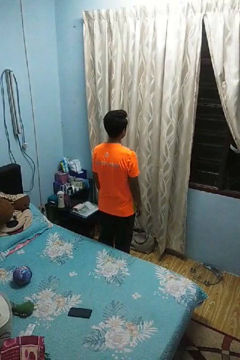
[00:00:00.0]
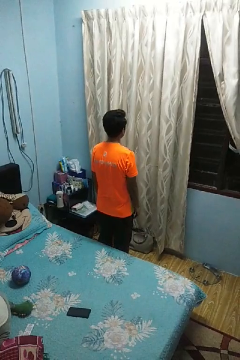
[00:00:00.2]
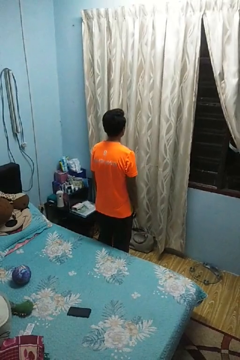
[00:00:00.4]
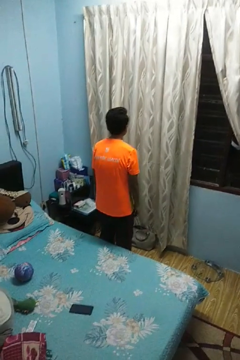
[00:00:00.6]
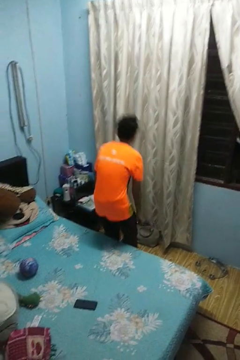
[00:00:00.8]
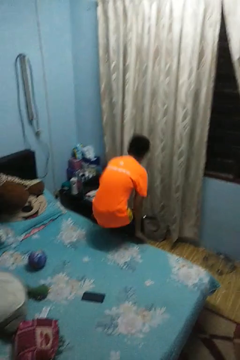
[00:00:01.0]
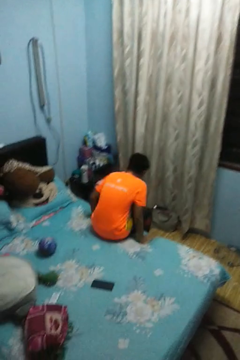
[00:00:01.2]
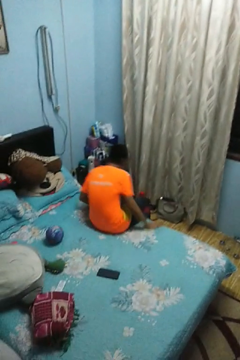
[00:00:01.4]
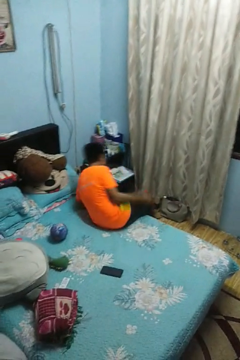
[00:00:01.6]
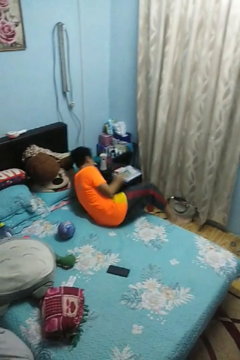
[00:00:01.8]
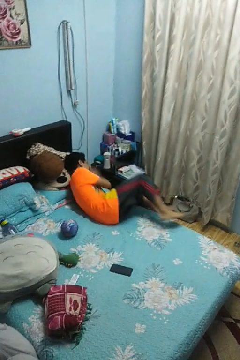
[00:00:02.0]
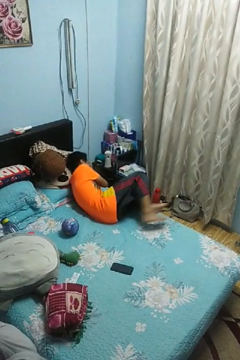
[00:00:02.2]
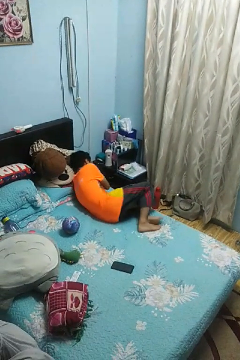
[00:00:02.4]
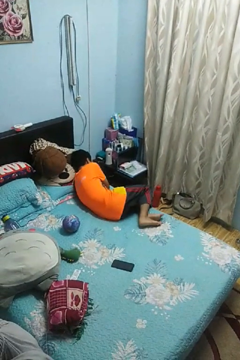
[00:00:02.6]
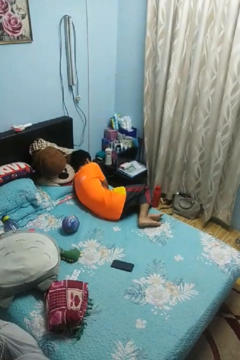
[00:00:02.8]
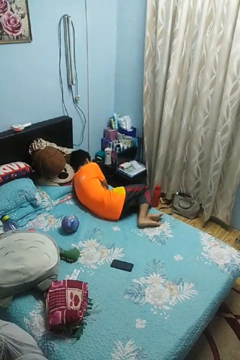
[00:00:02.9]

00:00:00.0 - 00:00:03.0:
person lies down on bed

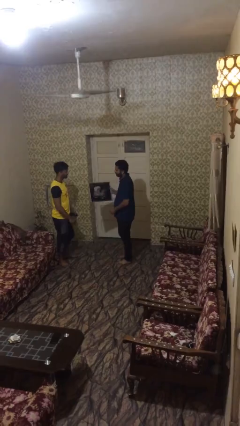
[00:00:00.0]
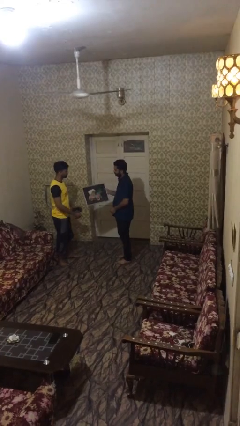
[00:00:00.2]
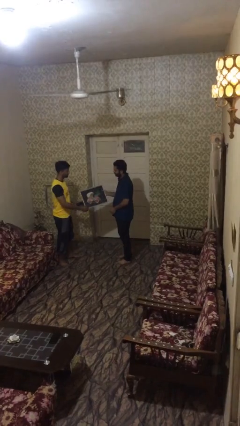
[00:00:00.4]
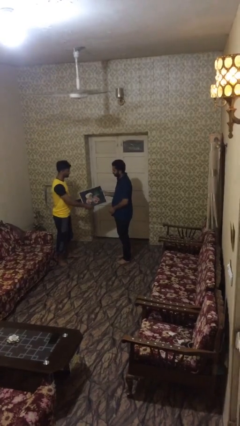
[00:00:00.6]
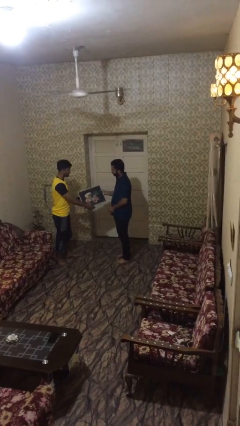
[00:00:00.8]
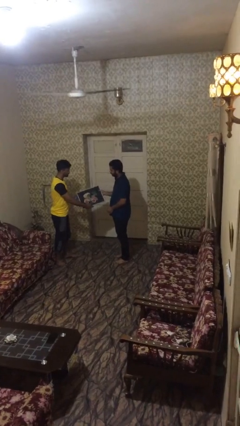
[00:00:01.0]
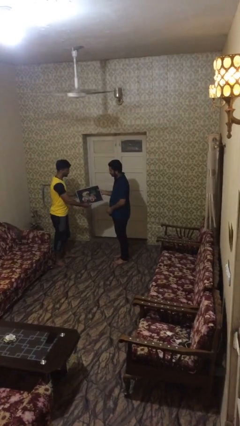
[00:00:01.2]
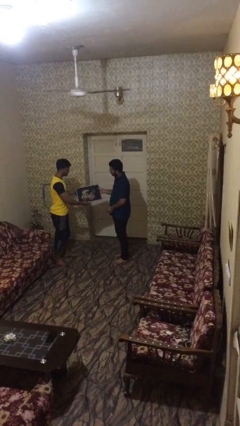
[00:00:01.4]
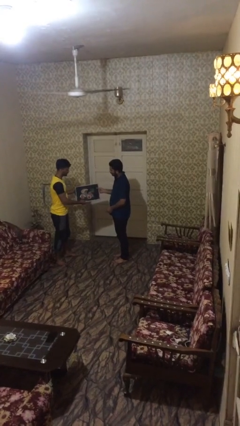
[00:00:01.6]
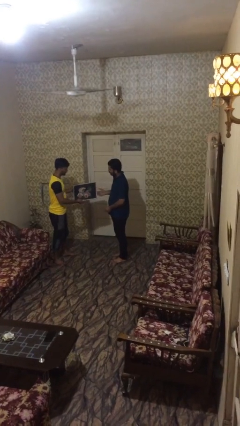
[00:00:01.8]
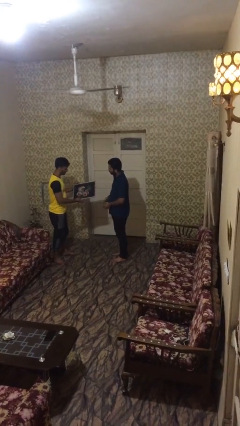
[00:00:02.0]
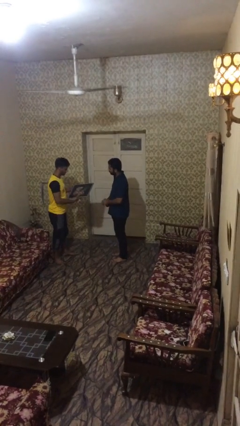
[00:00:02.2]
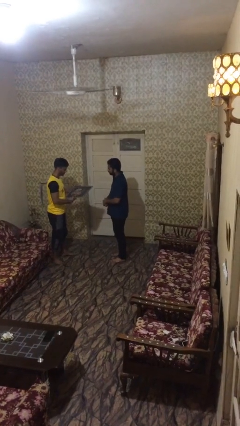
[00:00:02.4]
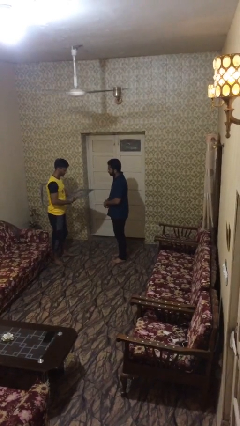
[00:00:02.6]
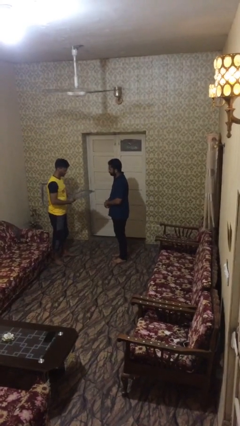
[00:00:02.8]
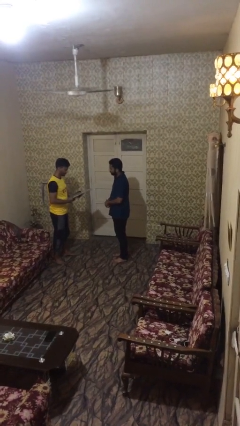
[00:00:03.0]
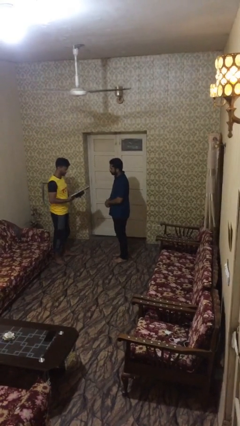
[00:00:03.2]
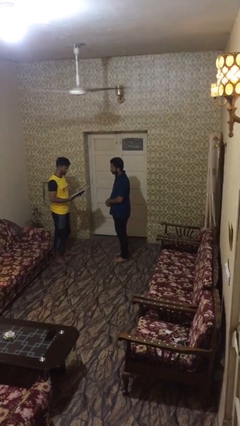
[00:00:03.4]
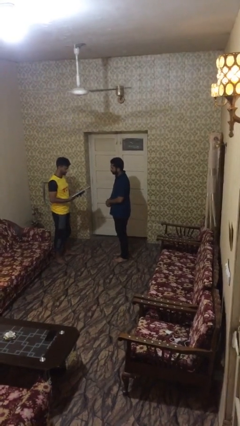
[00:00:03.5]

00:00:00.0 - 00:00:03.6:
person transfers object to person

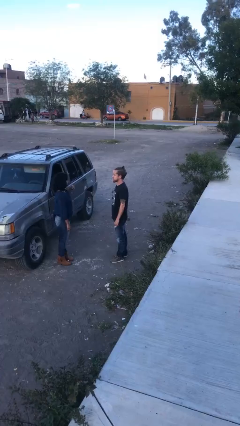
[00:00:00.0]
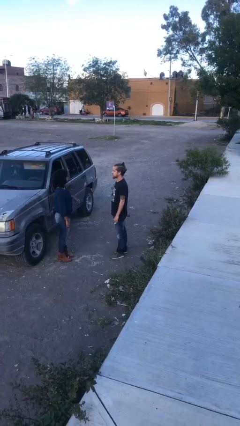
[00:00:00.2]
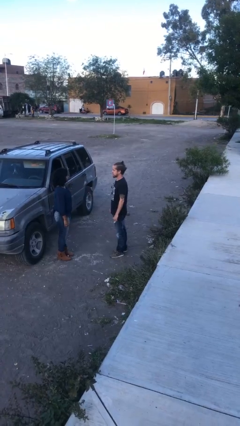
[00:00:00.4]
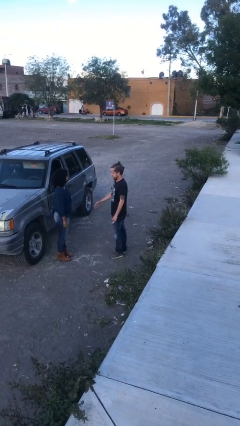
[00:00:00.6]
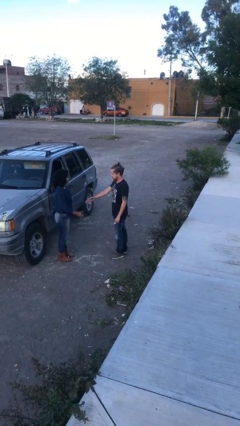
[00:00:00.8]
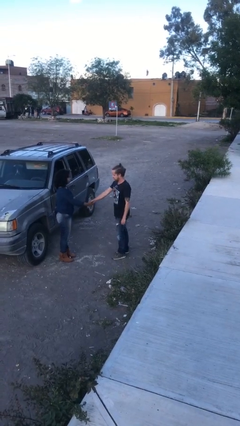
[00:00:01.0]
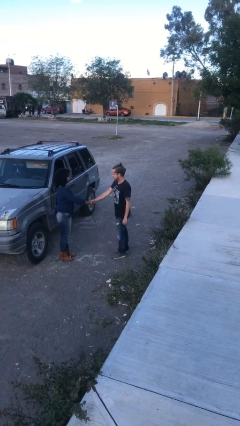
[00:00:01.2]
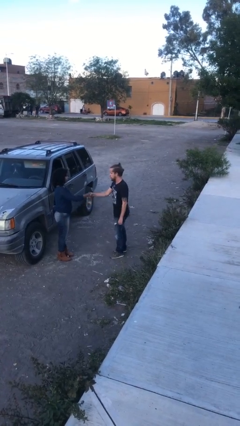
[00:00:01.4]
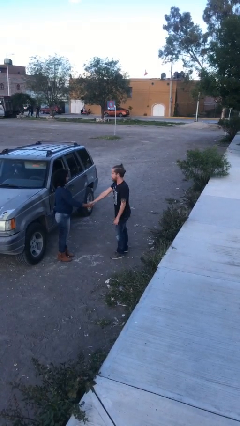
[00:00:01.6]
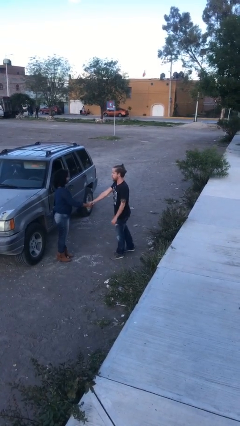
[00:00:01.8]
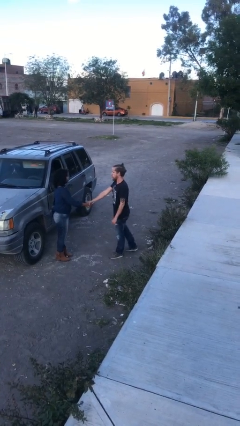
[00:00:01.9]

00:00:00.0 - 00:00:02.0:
person shakes hand

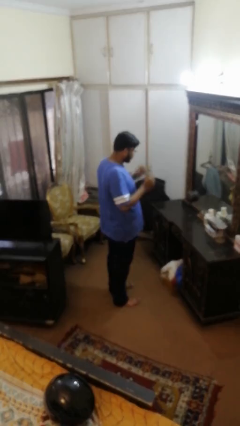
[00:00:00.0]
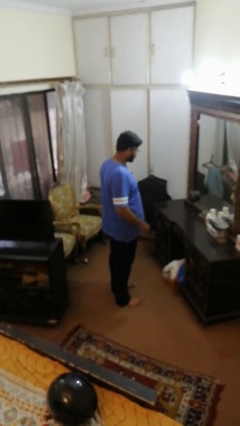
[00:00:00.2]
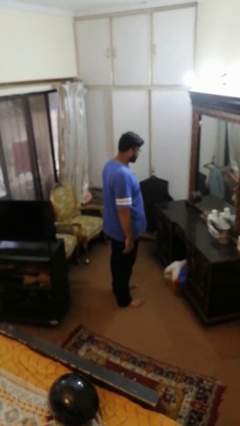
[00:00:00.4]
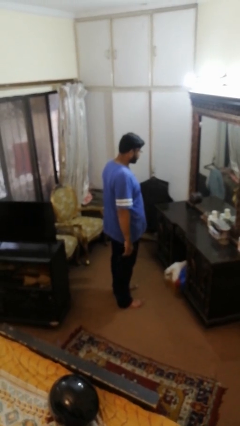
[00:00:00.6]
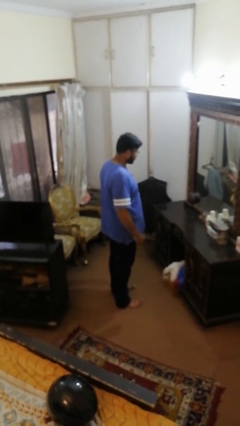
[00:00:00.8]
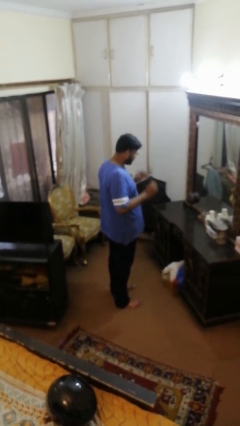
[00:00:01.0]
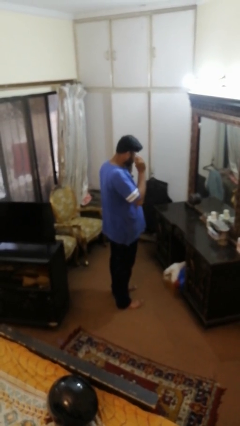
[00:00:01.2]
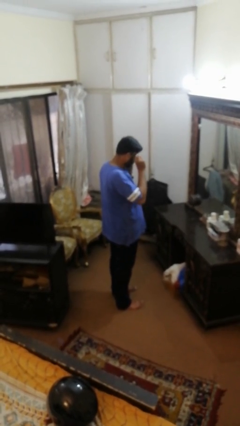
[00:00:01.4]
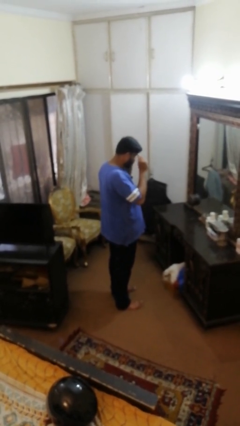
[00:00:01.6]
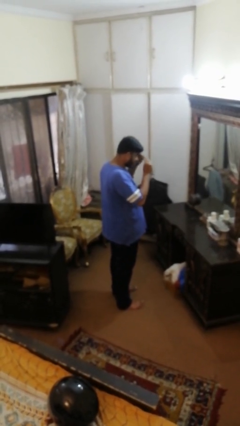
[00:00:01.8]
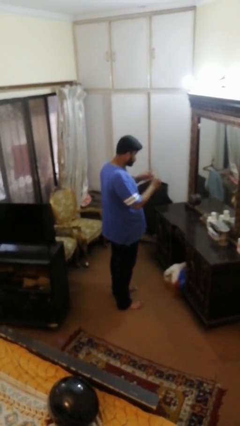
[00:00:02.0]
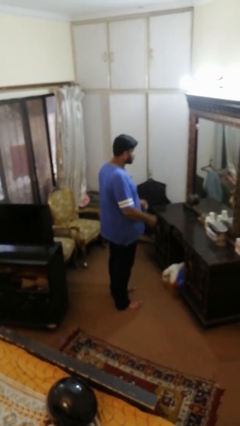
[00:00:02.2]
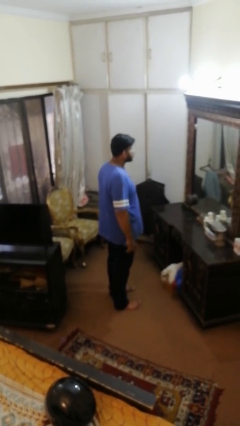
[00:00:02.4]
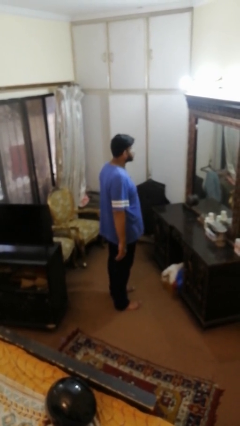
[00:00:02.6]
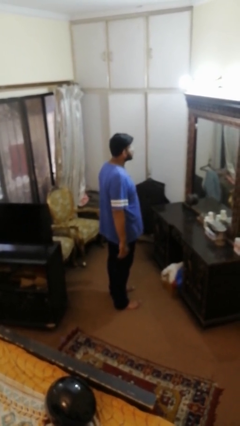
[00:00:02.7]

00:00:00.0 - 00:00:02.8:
person takes off glasses

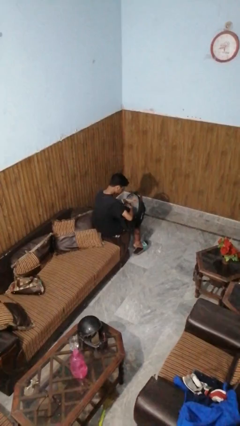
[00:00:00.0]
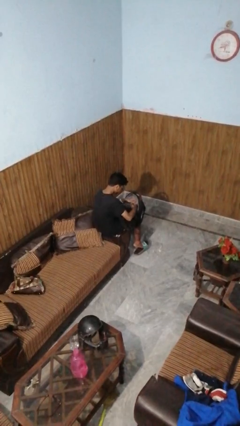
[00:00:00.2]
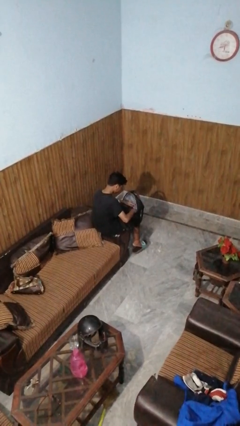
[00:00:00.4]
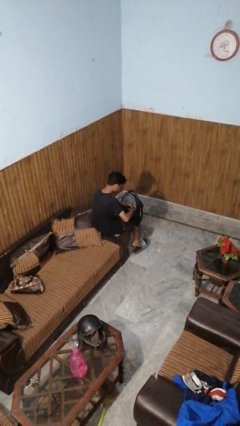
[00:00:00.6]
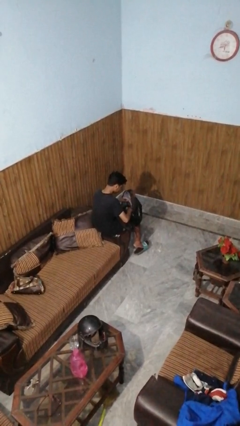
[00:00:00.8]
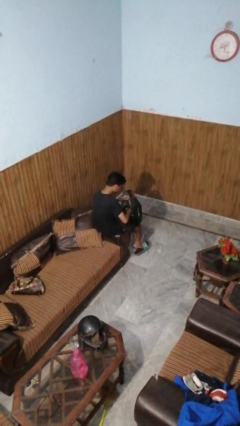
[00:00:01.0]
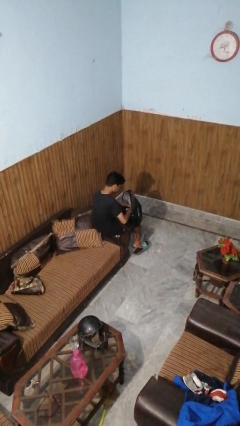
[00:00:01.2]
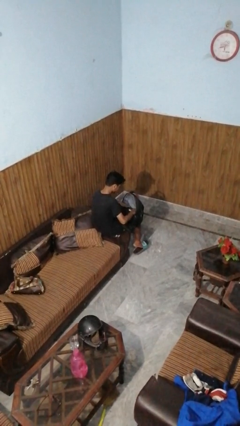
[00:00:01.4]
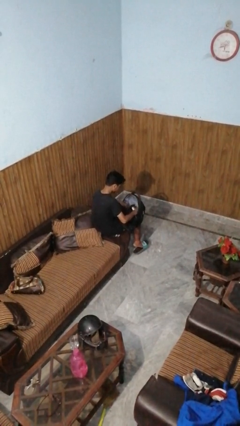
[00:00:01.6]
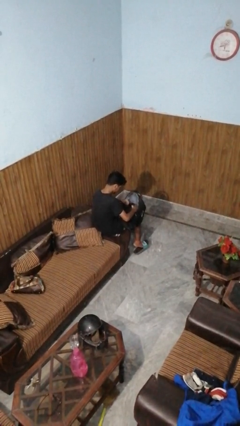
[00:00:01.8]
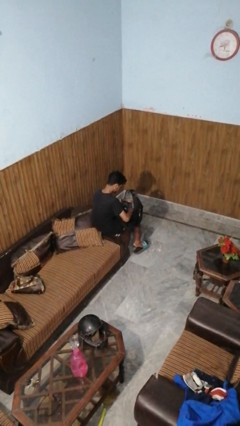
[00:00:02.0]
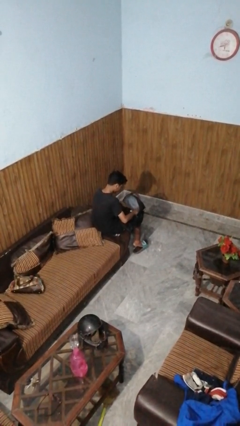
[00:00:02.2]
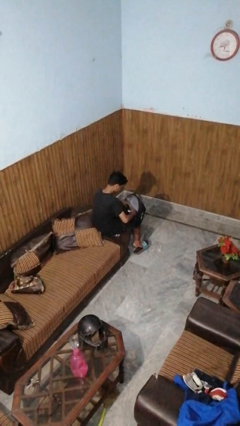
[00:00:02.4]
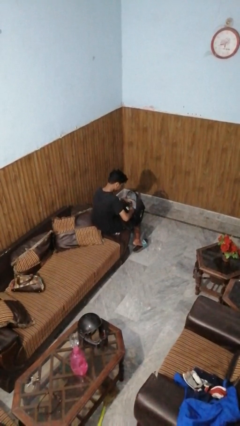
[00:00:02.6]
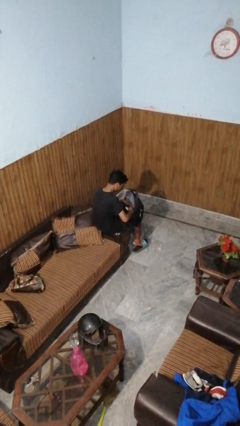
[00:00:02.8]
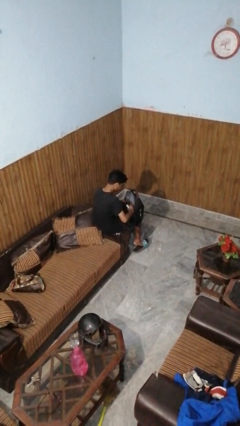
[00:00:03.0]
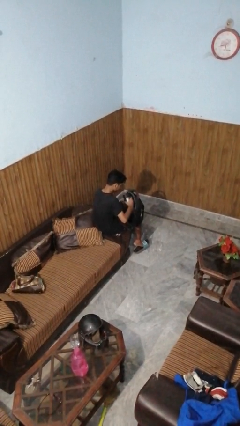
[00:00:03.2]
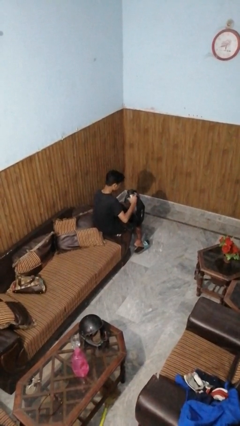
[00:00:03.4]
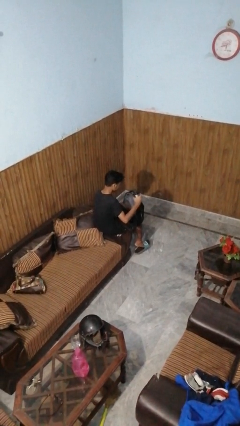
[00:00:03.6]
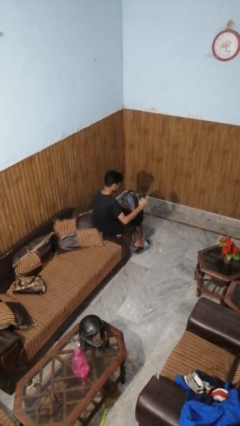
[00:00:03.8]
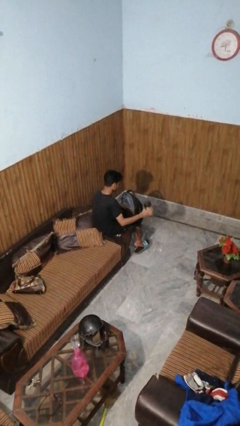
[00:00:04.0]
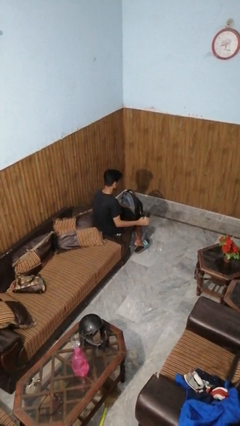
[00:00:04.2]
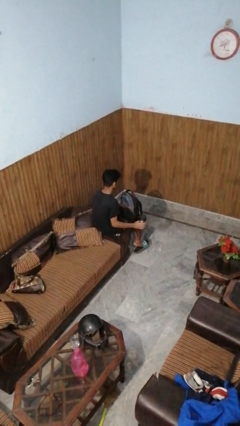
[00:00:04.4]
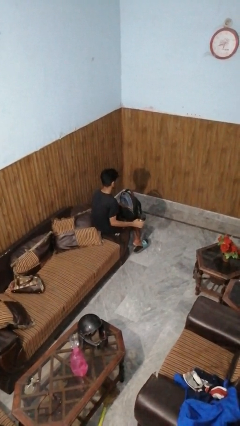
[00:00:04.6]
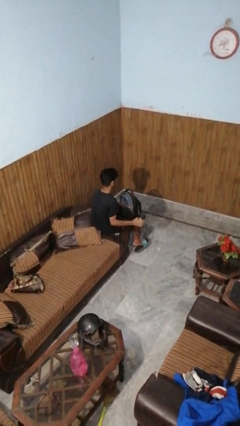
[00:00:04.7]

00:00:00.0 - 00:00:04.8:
person takes object from backpack

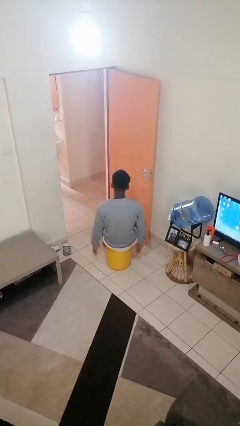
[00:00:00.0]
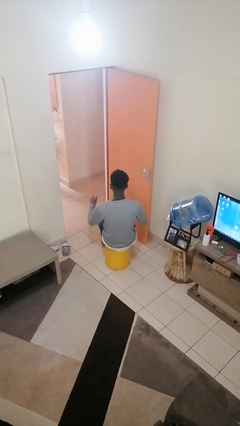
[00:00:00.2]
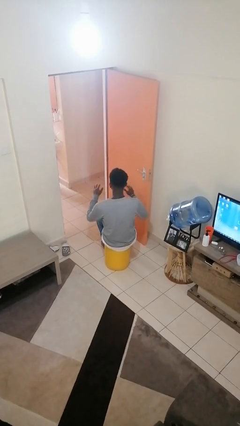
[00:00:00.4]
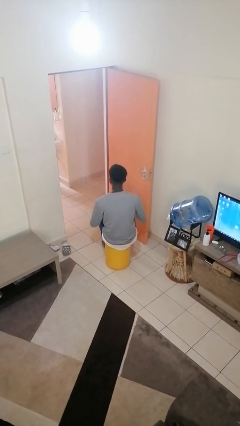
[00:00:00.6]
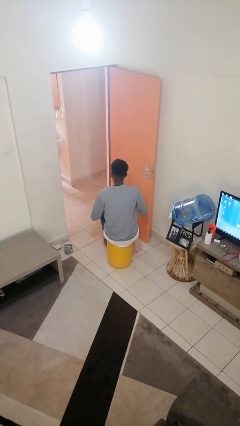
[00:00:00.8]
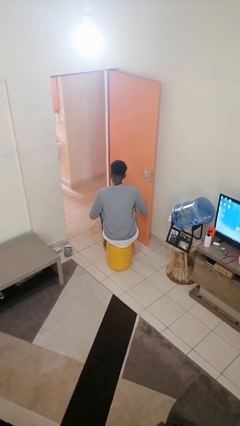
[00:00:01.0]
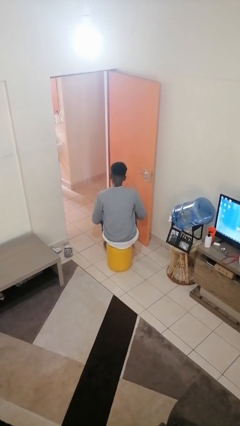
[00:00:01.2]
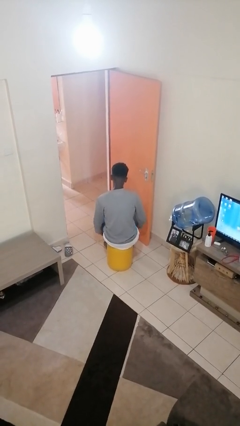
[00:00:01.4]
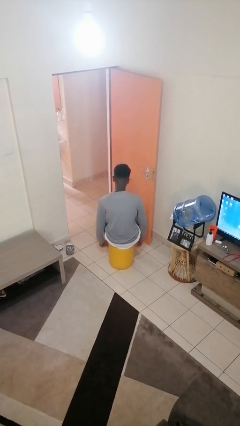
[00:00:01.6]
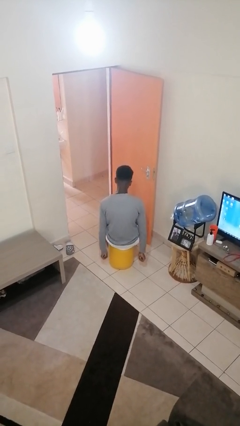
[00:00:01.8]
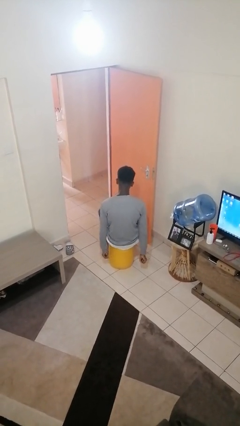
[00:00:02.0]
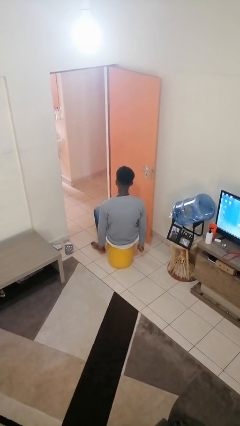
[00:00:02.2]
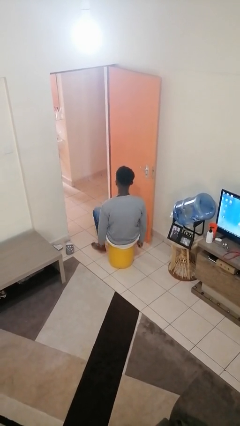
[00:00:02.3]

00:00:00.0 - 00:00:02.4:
person slaps hands on thighs
